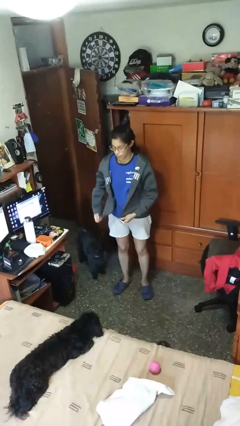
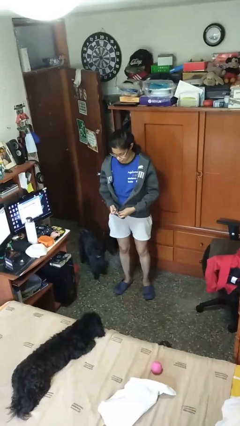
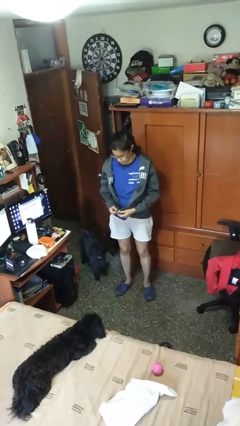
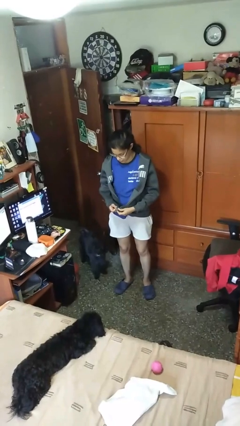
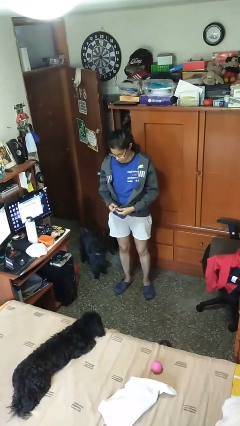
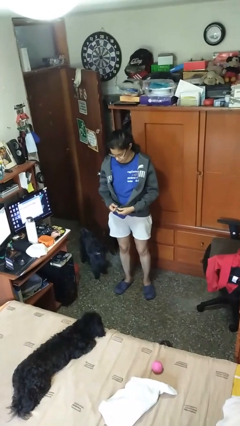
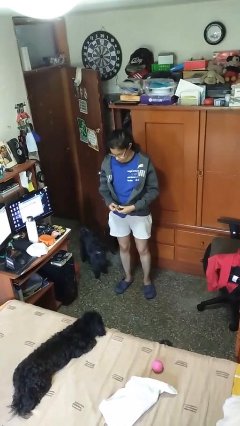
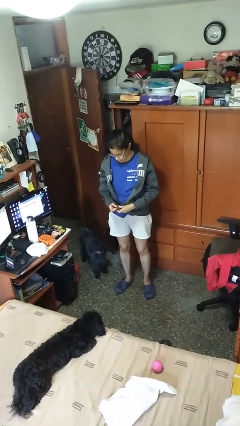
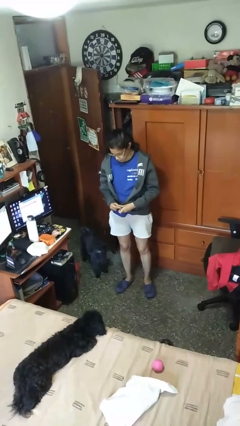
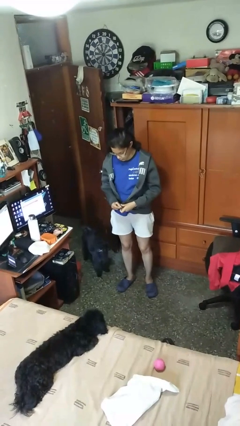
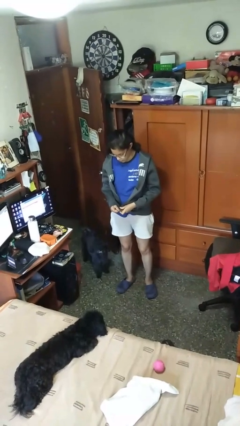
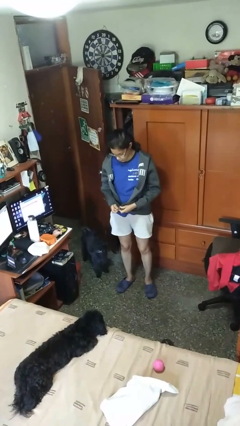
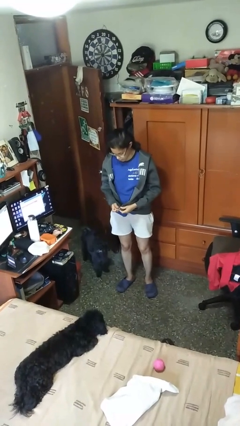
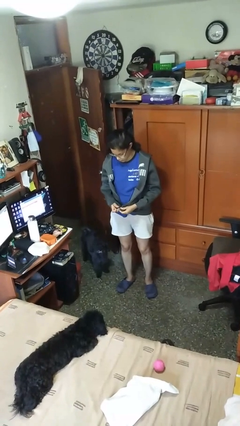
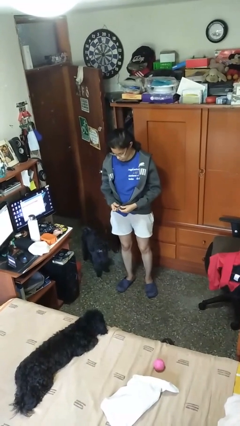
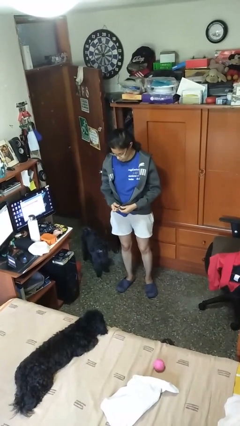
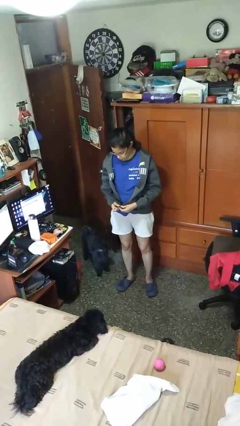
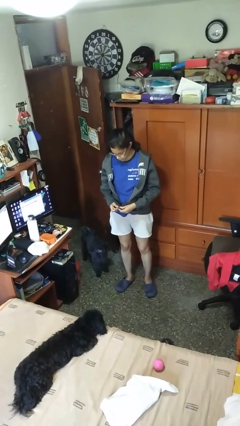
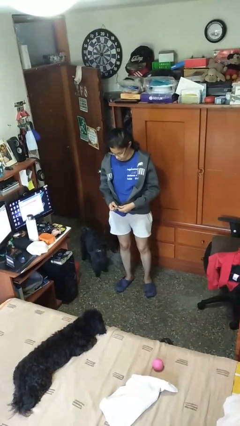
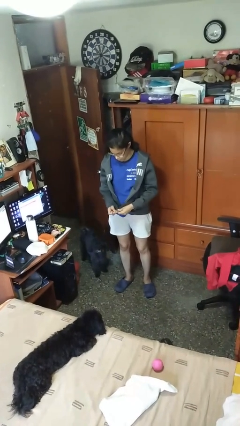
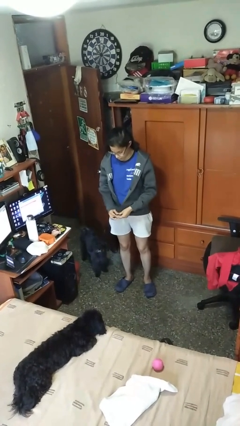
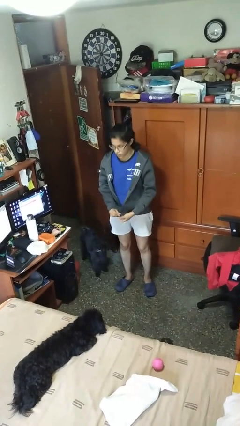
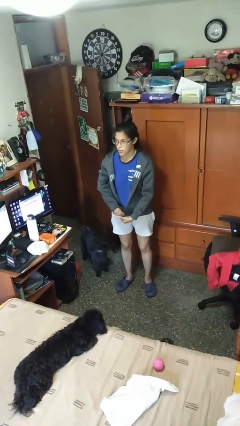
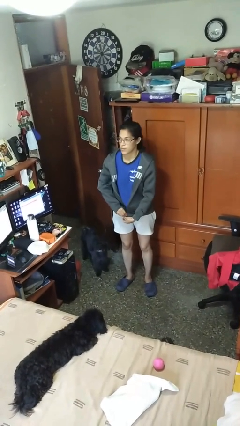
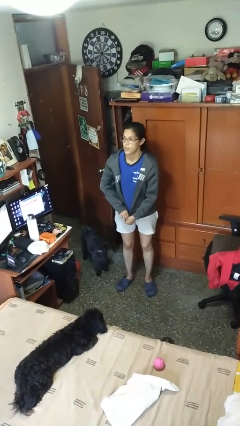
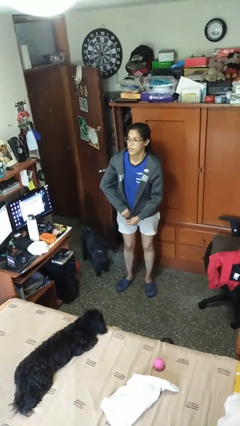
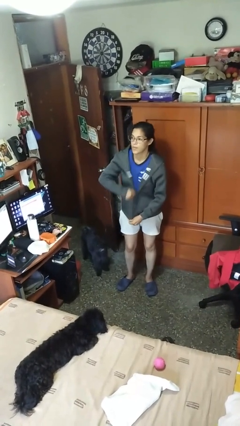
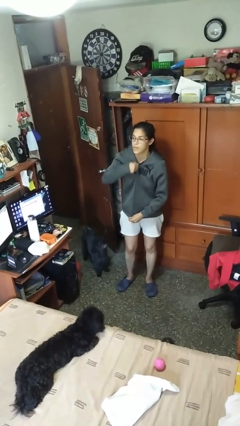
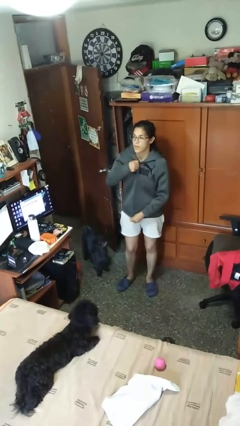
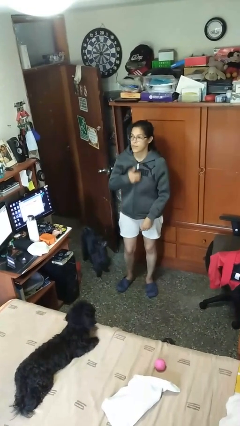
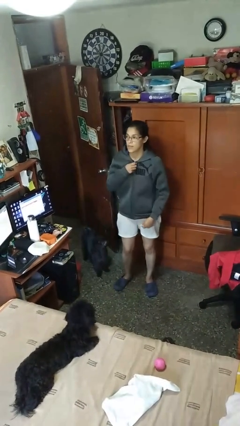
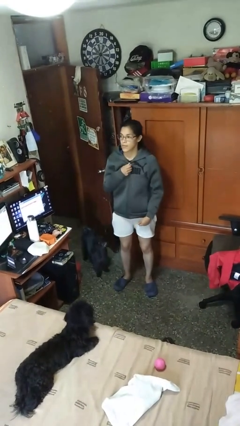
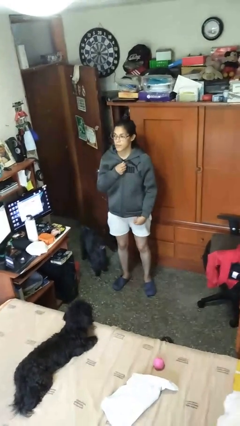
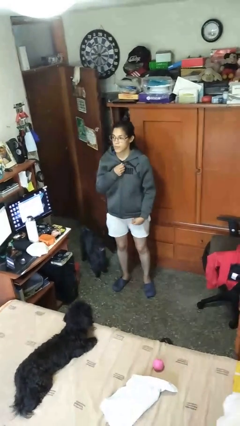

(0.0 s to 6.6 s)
person zips up jacket

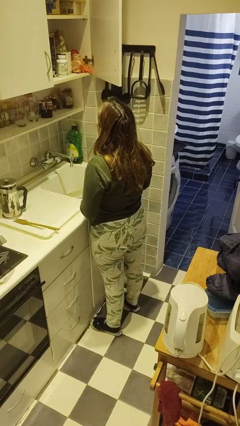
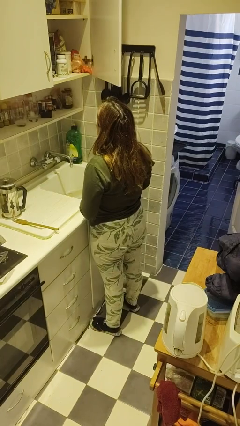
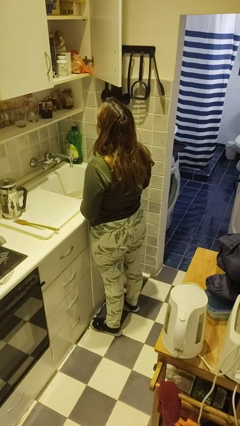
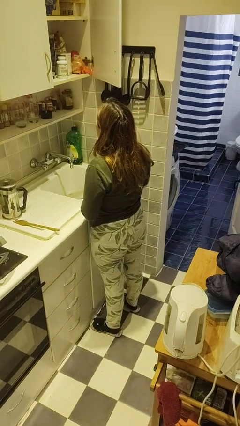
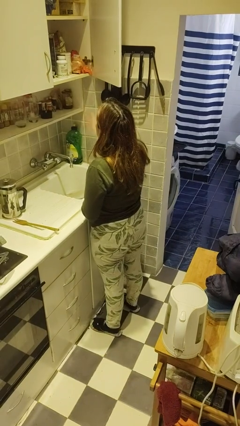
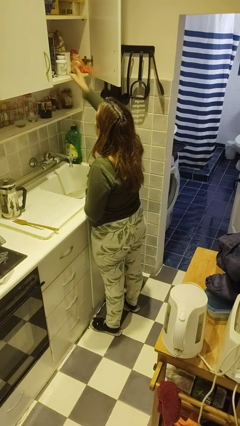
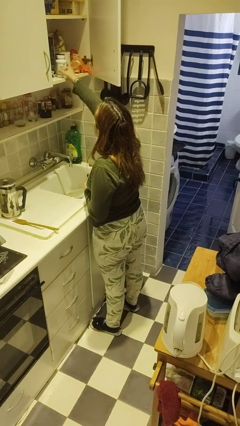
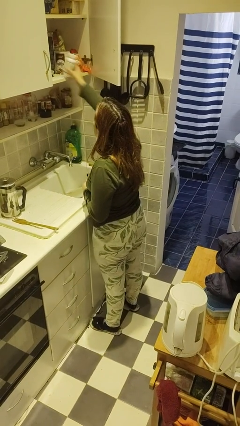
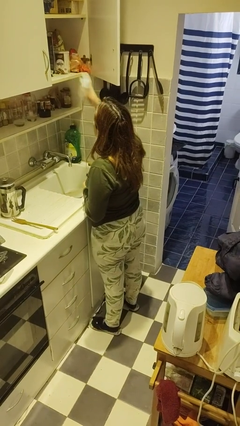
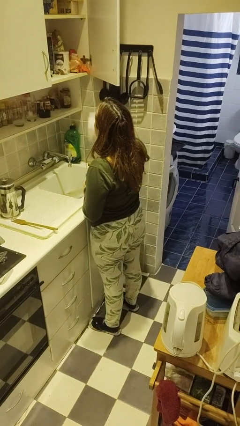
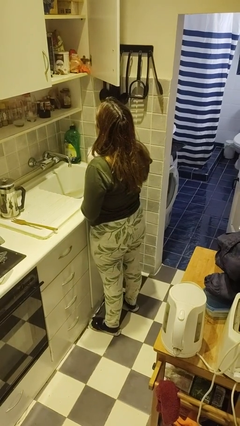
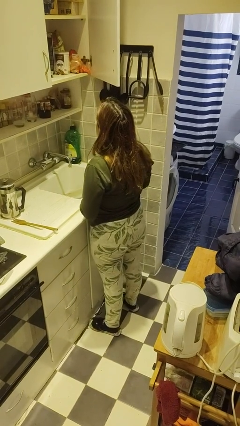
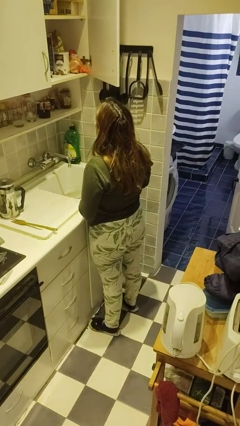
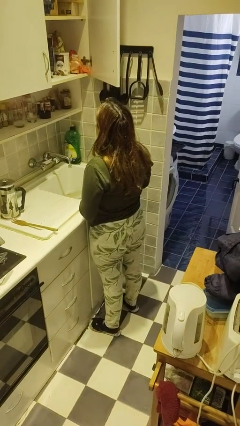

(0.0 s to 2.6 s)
person takes object from cabinet

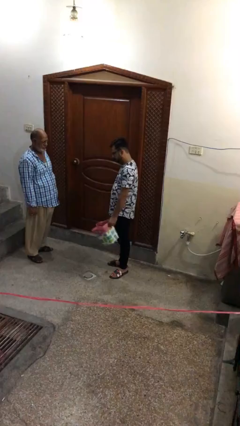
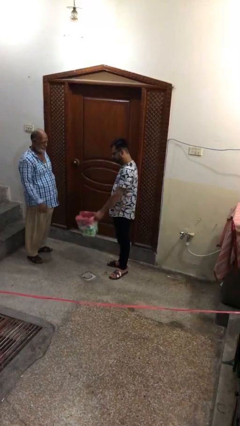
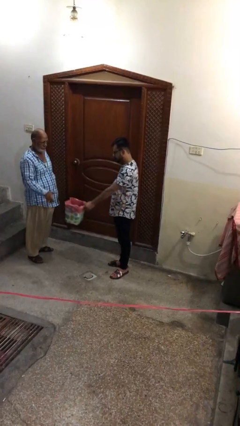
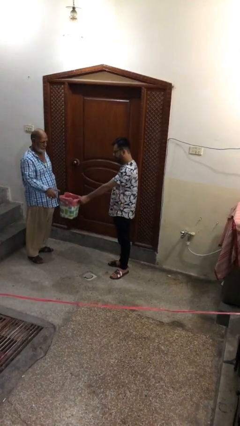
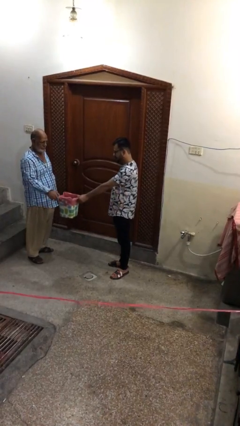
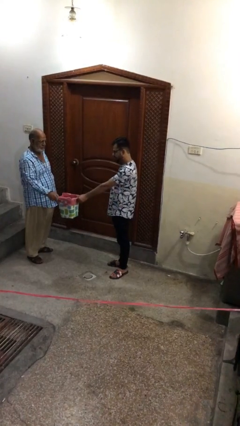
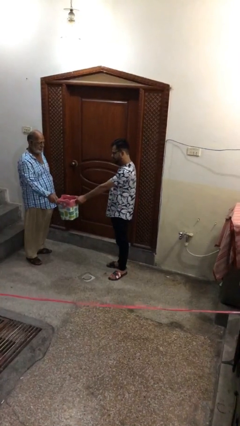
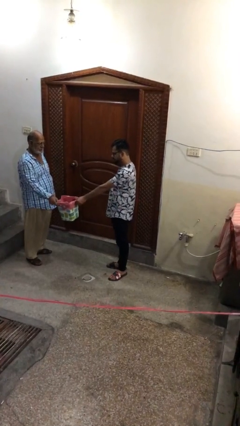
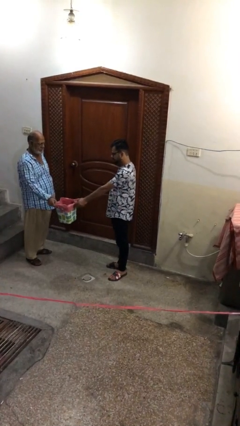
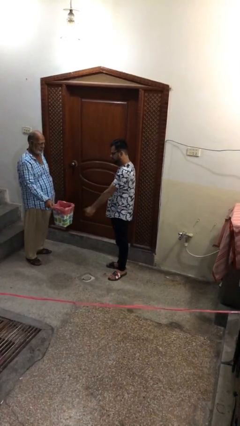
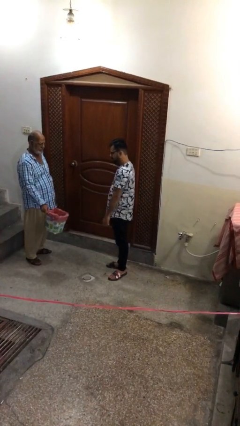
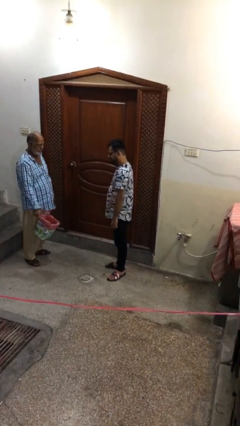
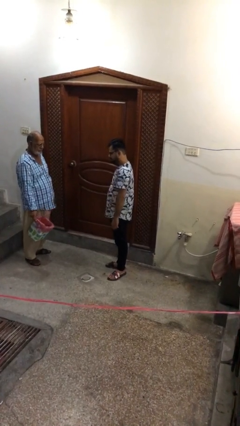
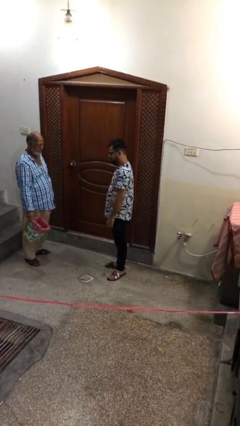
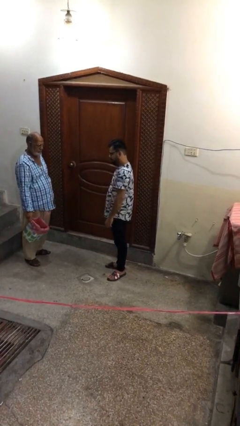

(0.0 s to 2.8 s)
person transfers object to person

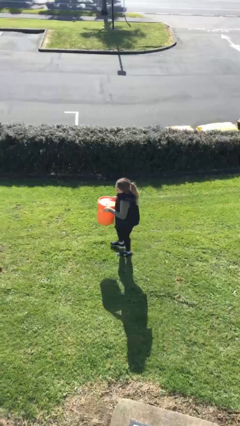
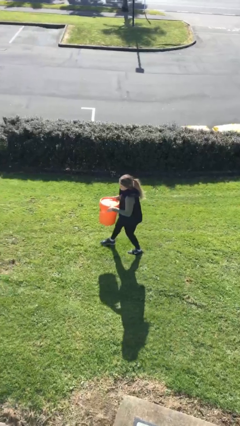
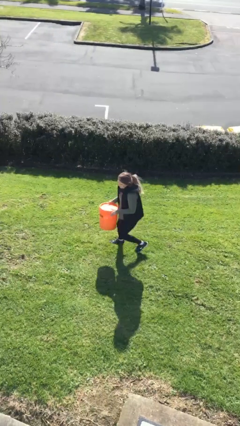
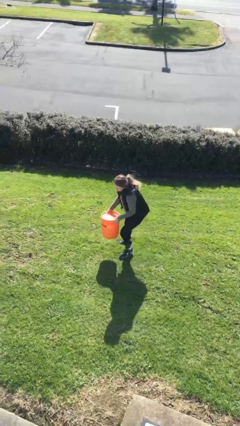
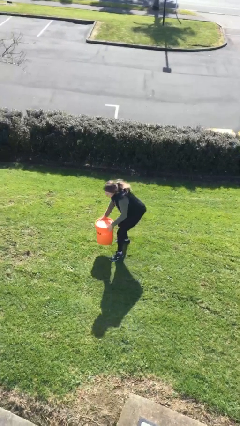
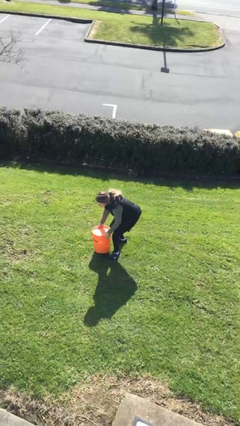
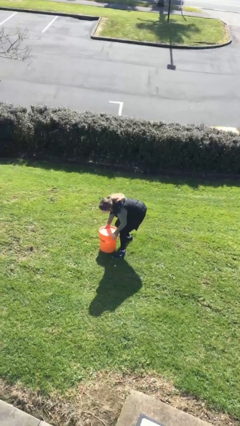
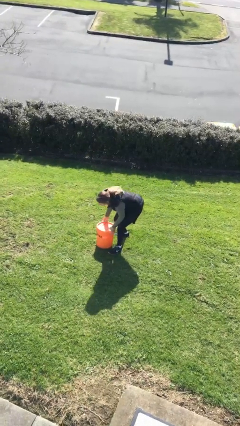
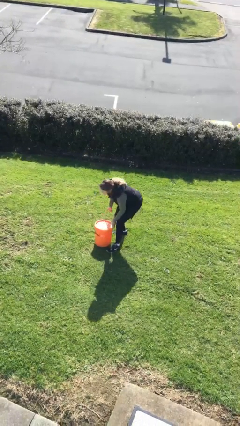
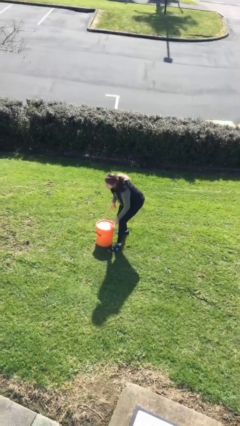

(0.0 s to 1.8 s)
person puts down object on floor

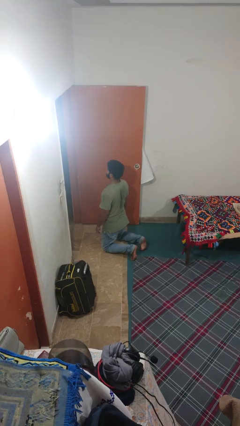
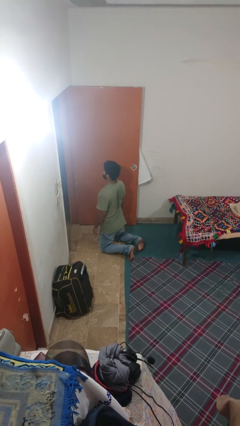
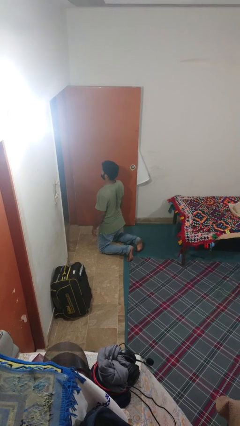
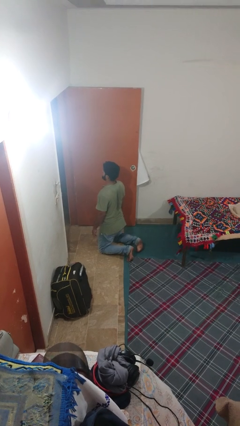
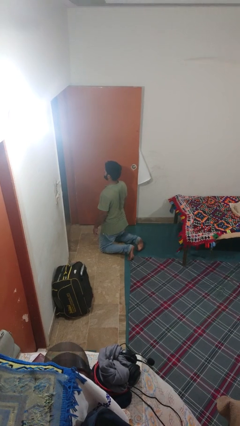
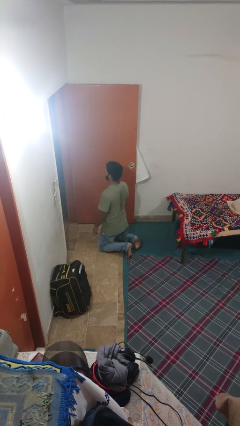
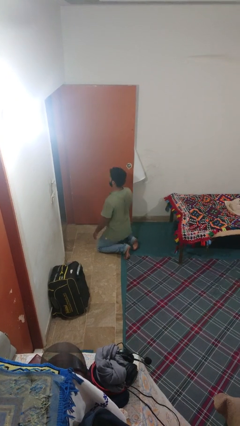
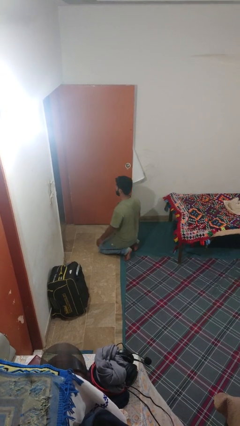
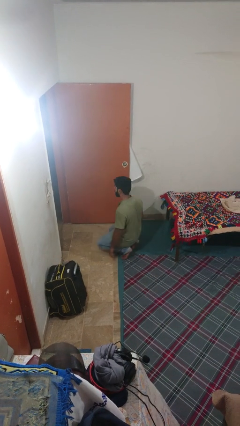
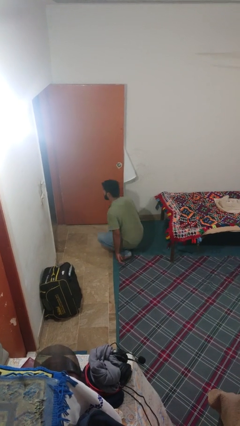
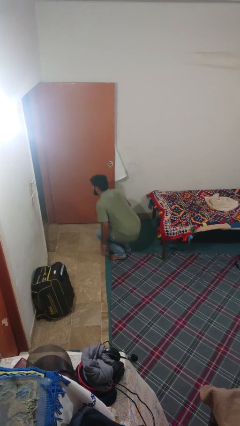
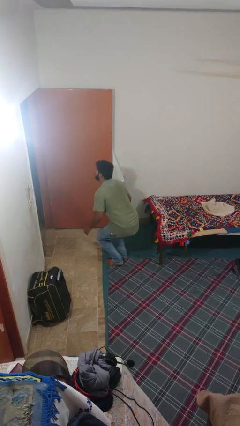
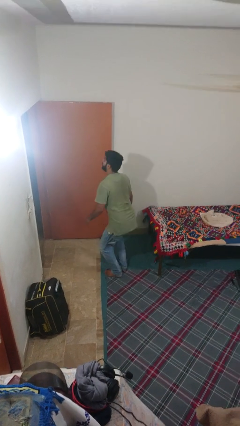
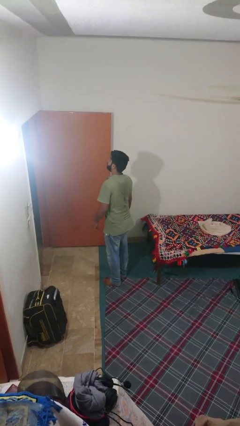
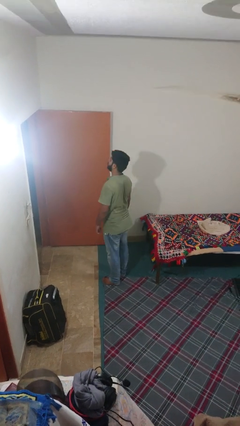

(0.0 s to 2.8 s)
person stands up from floor

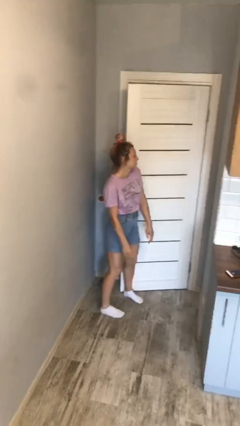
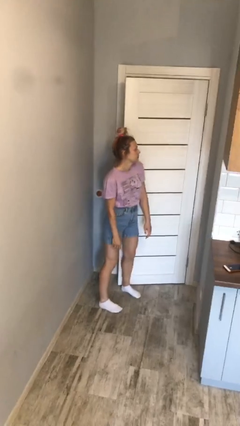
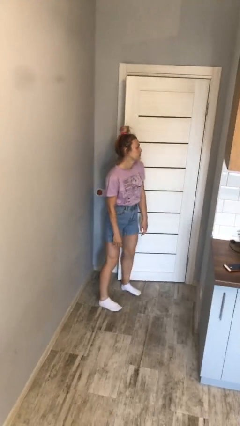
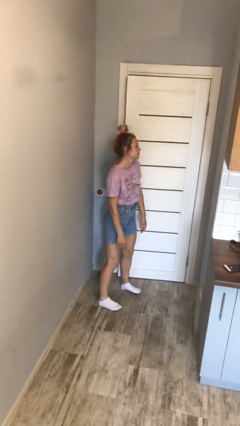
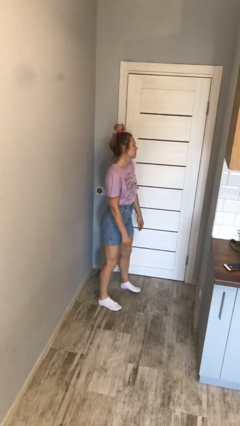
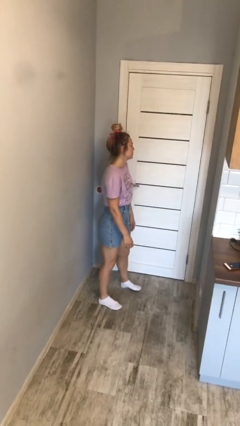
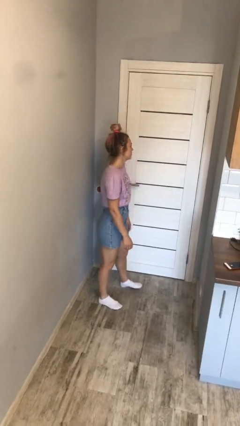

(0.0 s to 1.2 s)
person closes door with hip
